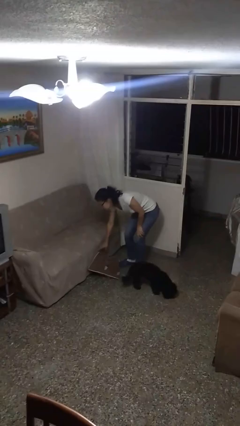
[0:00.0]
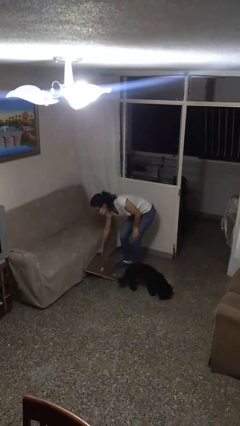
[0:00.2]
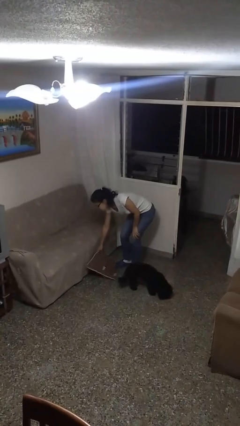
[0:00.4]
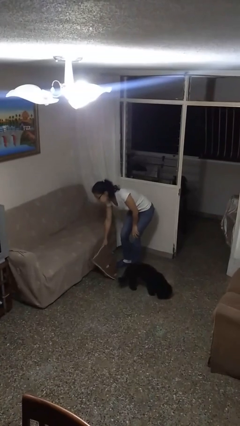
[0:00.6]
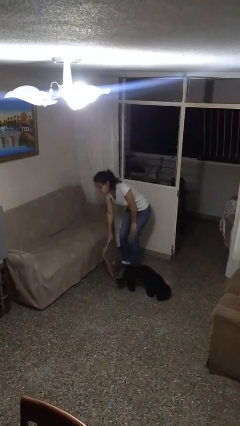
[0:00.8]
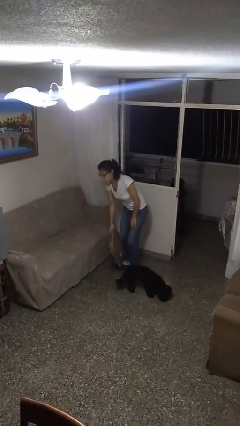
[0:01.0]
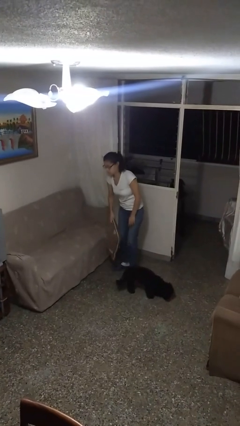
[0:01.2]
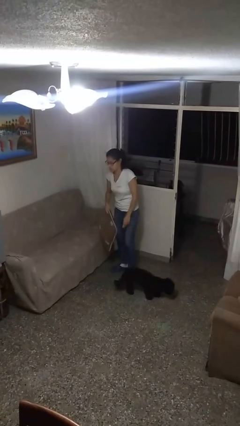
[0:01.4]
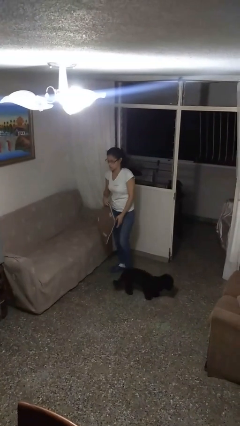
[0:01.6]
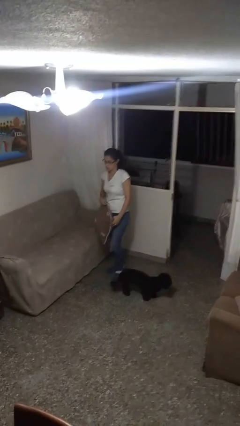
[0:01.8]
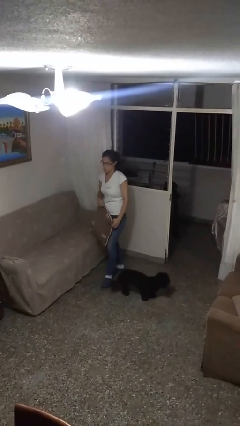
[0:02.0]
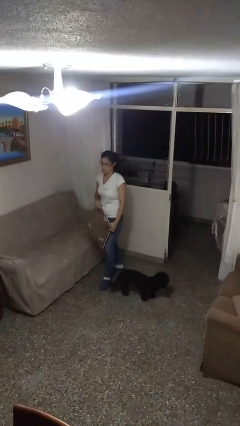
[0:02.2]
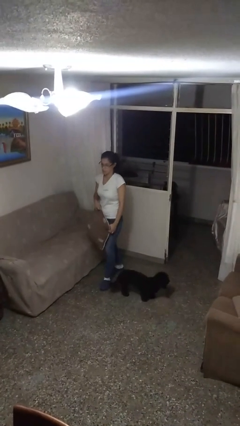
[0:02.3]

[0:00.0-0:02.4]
person picks up object from floor

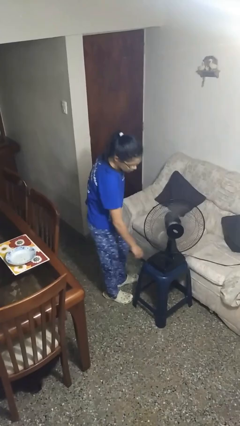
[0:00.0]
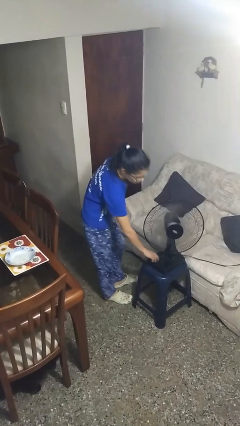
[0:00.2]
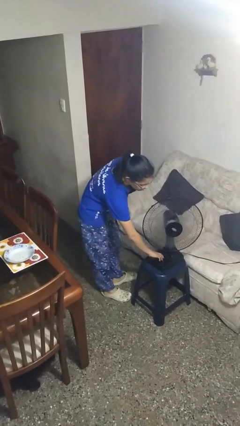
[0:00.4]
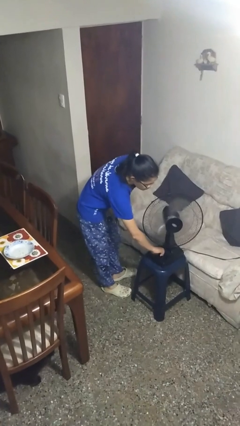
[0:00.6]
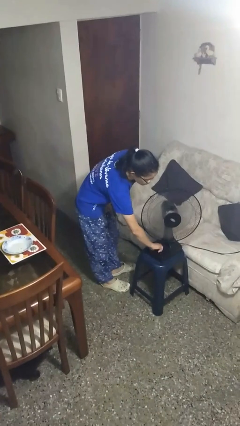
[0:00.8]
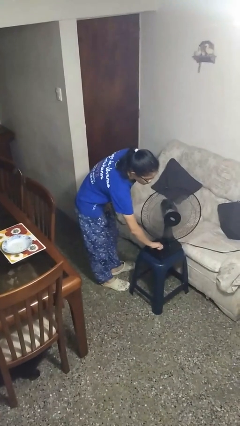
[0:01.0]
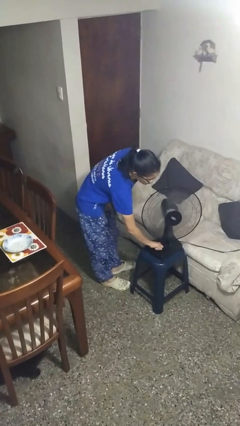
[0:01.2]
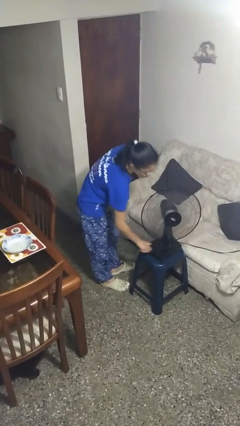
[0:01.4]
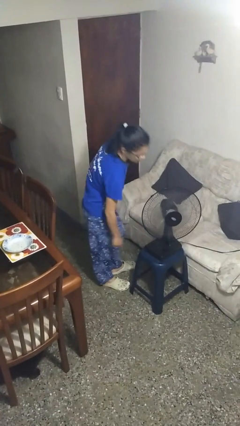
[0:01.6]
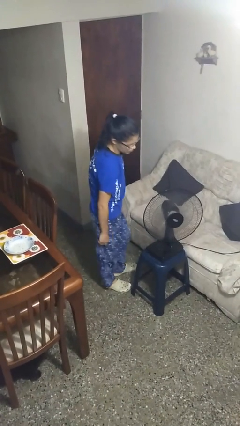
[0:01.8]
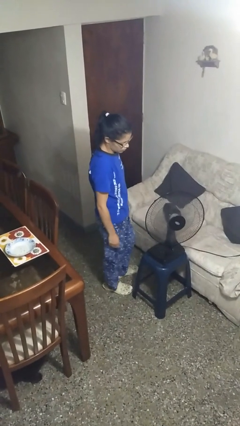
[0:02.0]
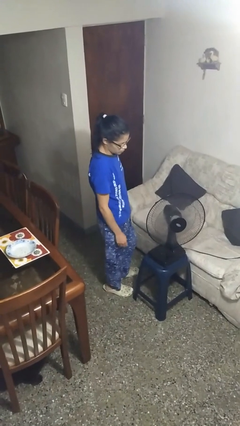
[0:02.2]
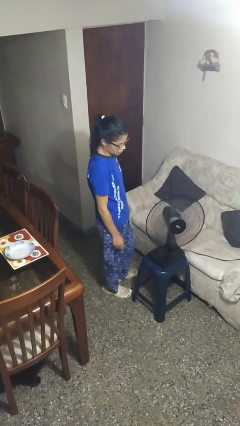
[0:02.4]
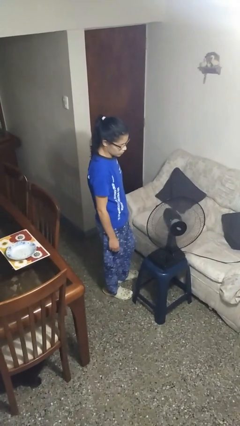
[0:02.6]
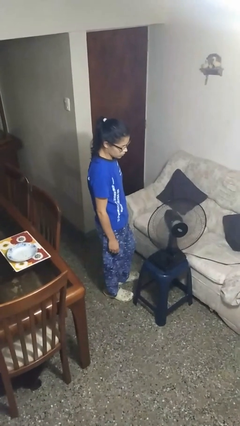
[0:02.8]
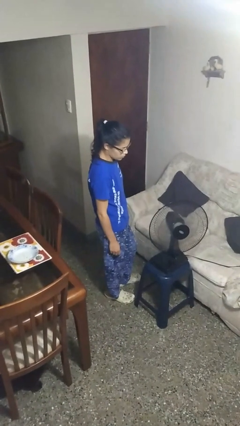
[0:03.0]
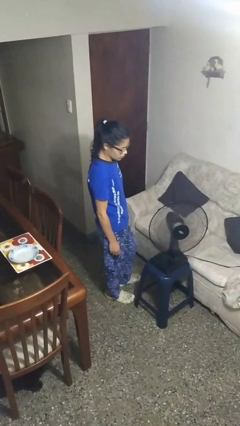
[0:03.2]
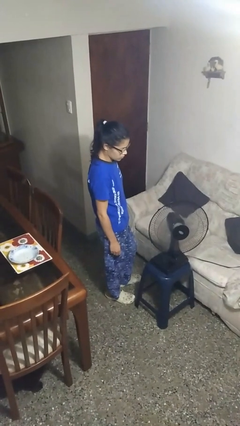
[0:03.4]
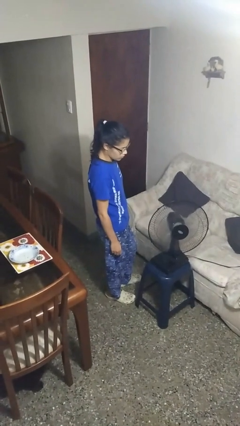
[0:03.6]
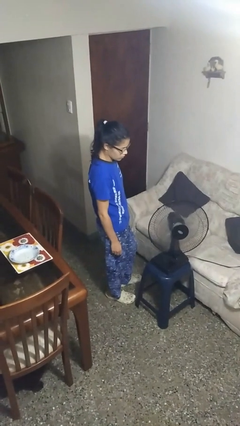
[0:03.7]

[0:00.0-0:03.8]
person turns on fan

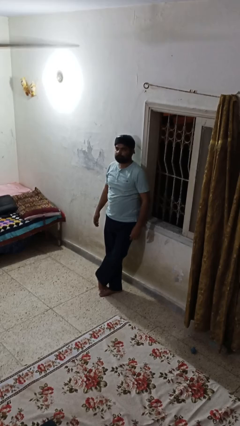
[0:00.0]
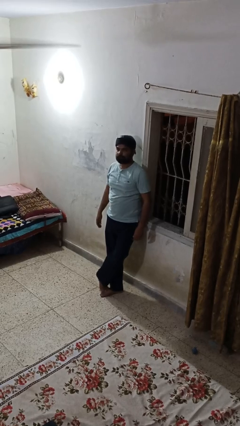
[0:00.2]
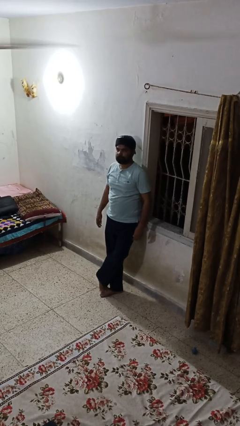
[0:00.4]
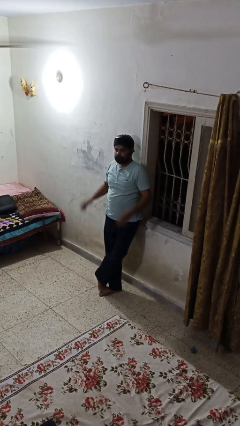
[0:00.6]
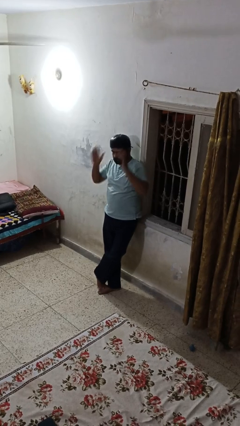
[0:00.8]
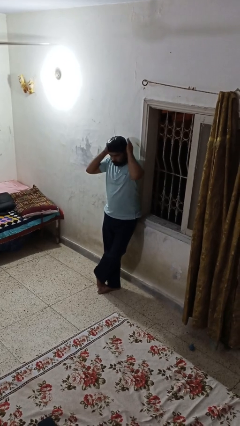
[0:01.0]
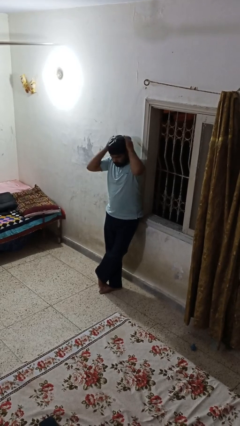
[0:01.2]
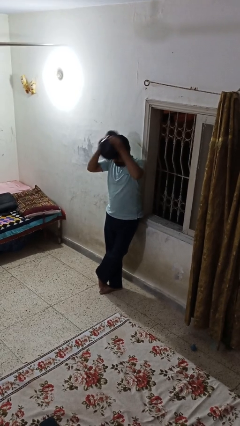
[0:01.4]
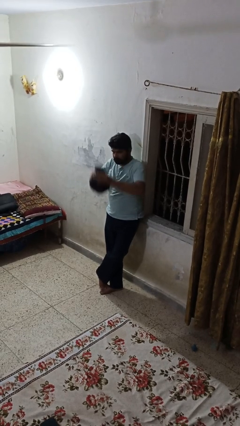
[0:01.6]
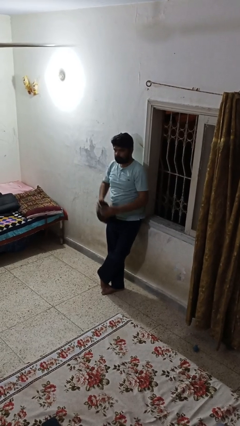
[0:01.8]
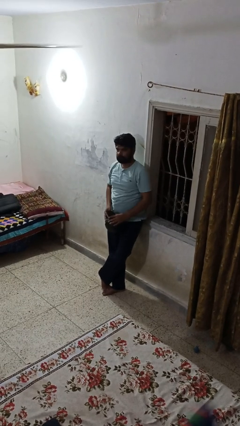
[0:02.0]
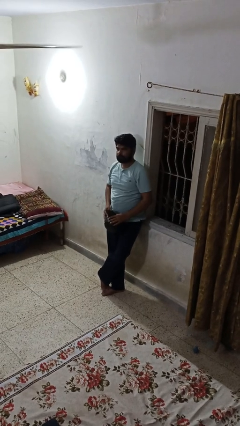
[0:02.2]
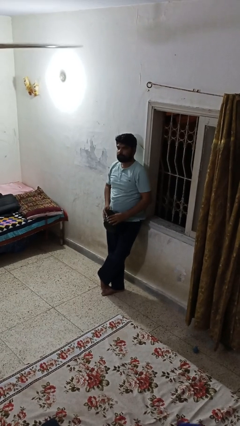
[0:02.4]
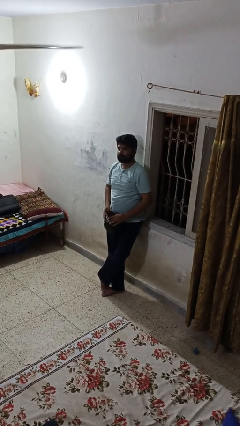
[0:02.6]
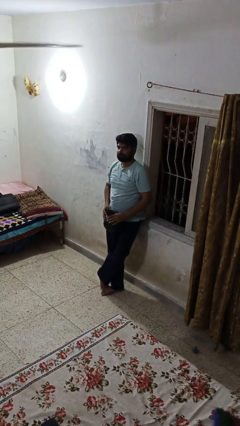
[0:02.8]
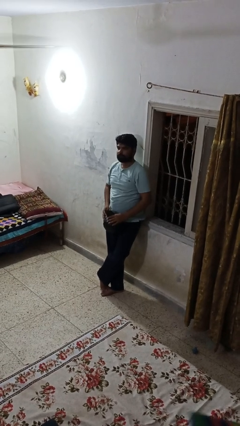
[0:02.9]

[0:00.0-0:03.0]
person takes off hat

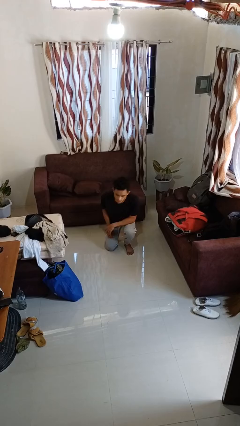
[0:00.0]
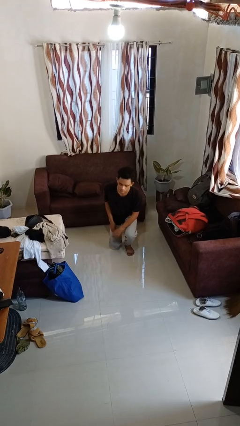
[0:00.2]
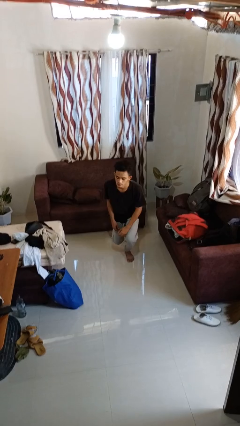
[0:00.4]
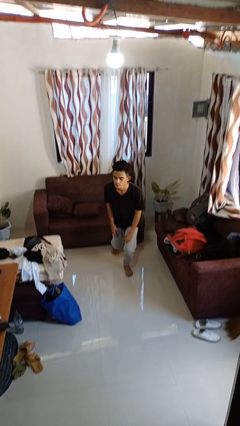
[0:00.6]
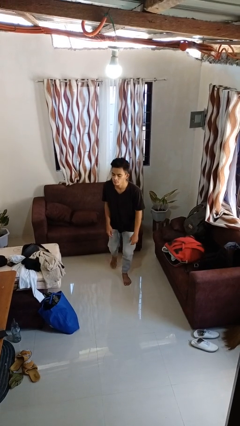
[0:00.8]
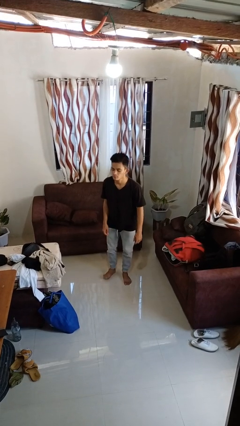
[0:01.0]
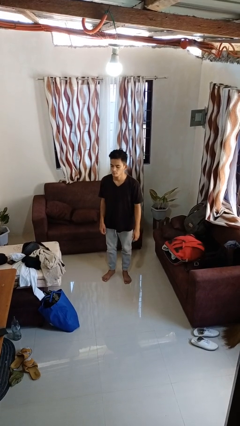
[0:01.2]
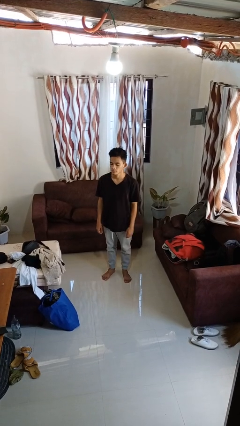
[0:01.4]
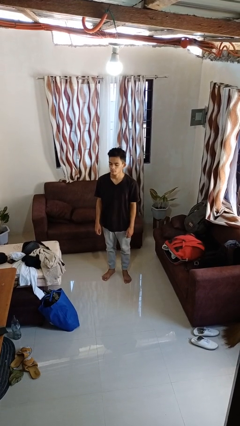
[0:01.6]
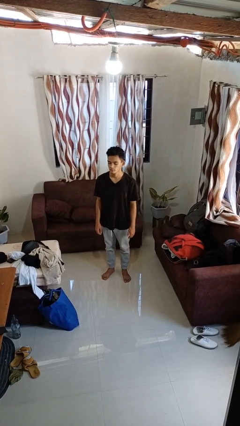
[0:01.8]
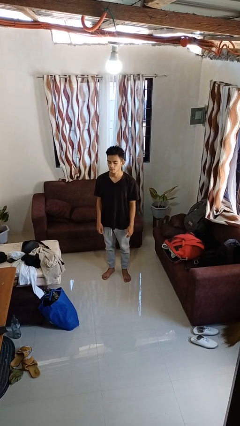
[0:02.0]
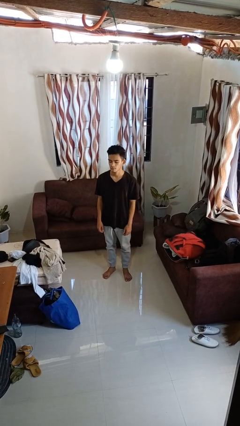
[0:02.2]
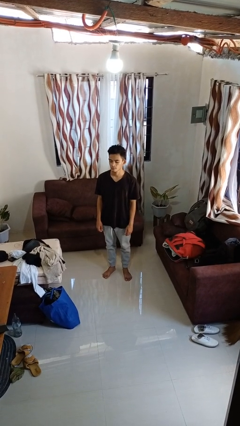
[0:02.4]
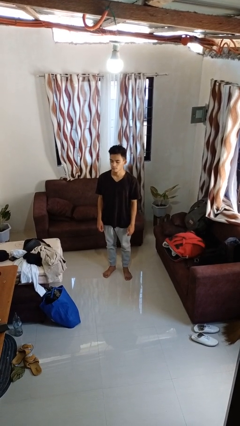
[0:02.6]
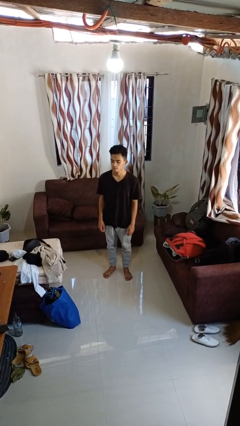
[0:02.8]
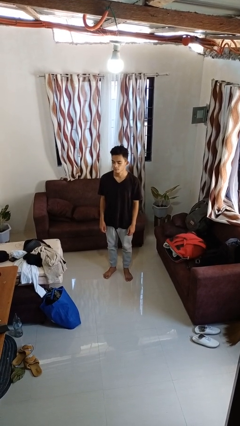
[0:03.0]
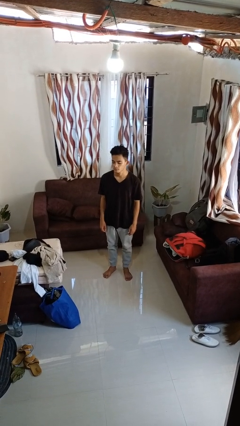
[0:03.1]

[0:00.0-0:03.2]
person stands up from floor

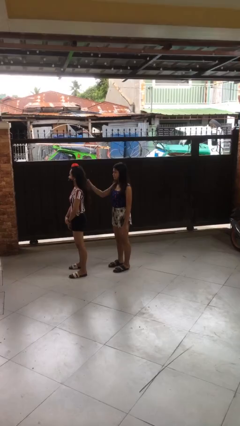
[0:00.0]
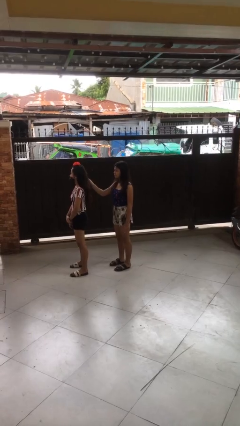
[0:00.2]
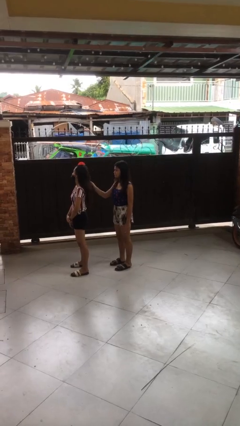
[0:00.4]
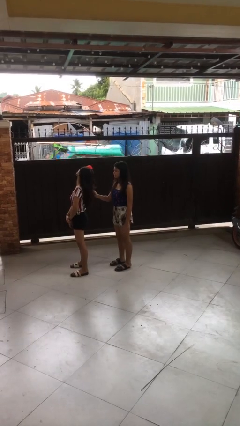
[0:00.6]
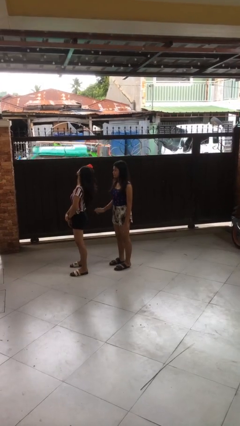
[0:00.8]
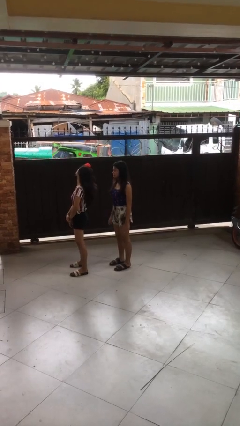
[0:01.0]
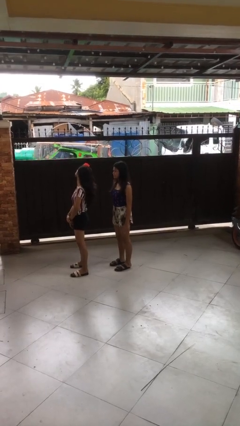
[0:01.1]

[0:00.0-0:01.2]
person grabs person by hair

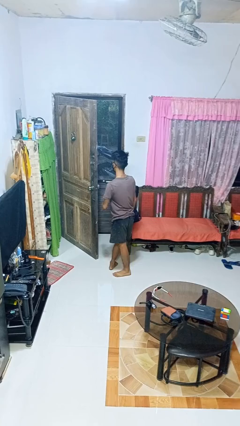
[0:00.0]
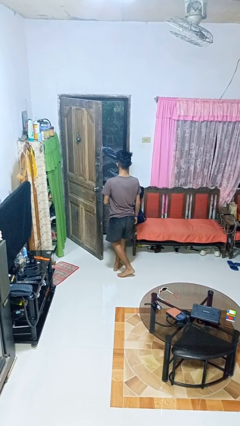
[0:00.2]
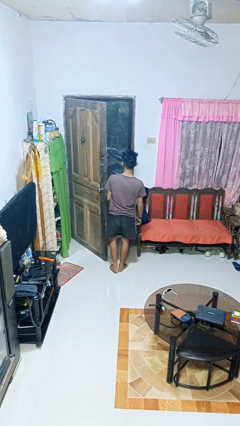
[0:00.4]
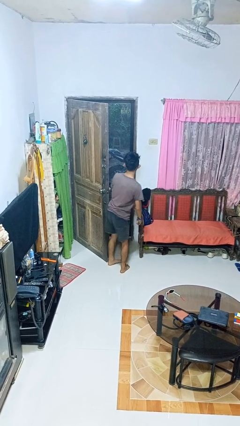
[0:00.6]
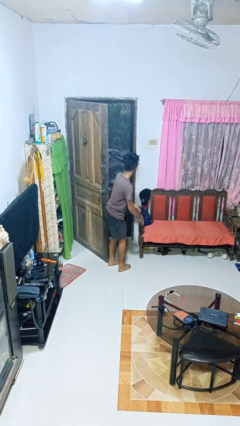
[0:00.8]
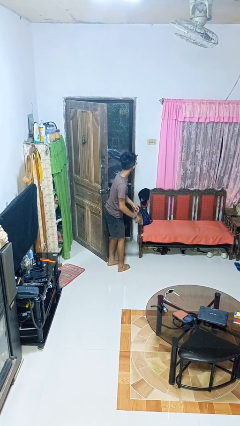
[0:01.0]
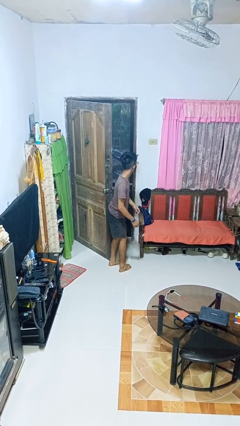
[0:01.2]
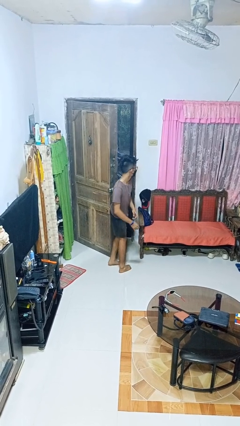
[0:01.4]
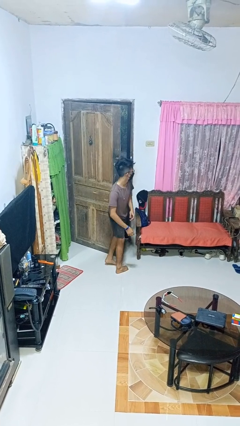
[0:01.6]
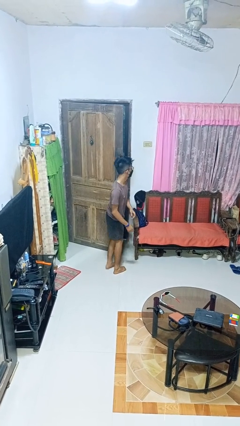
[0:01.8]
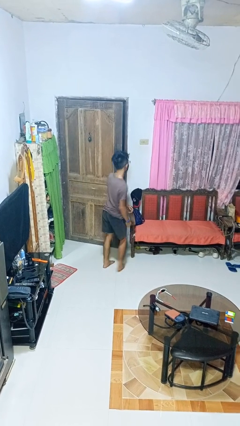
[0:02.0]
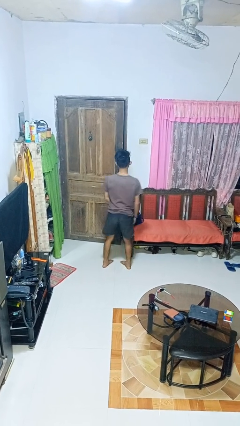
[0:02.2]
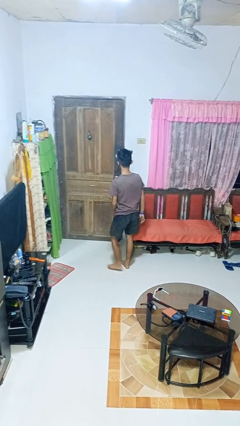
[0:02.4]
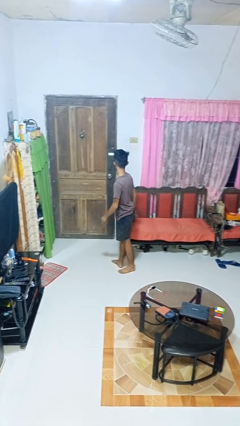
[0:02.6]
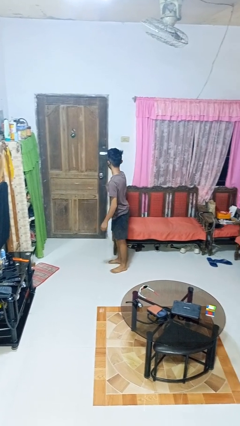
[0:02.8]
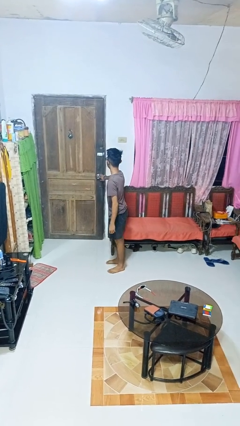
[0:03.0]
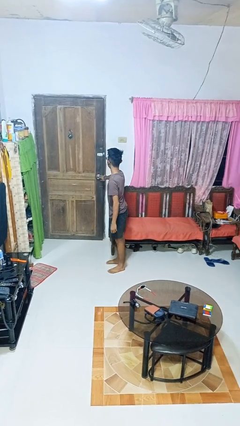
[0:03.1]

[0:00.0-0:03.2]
person closes door with hip
